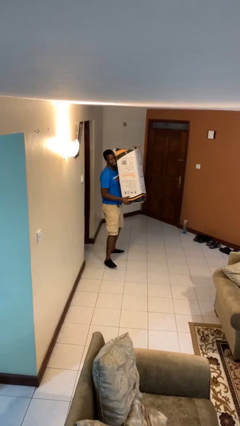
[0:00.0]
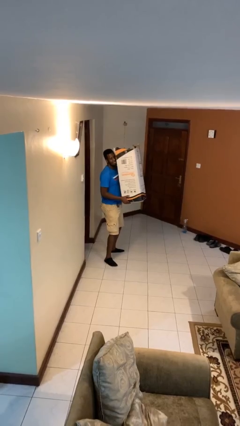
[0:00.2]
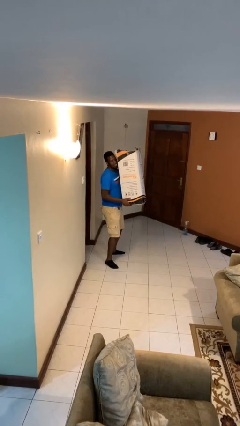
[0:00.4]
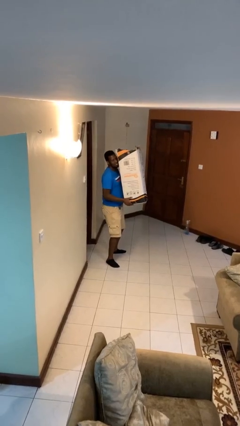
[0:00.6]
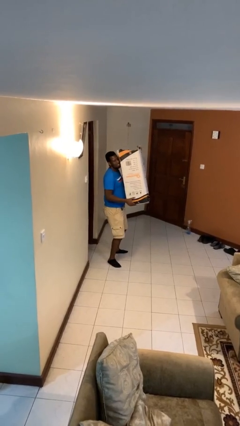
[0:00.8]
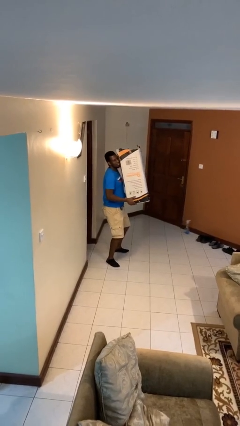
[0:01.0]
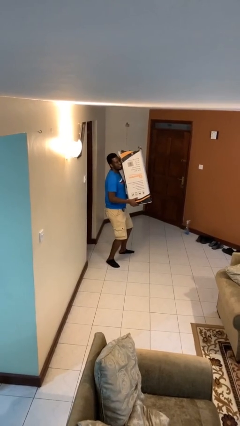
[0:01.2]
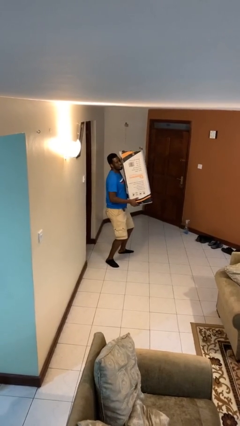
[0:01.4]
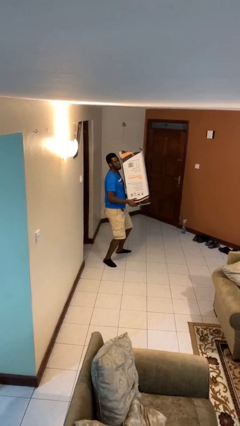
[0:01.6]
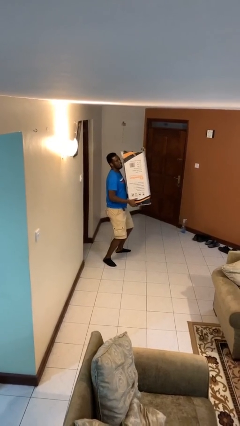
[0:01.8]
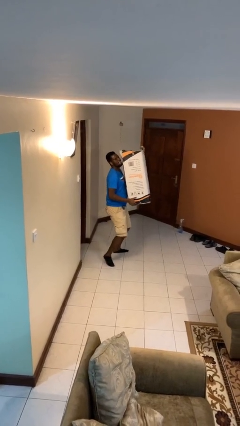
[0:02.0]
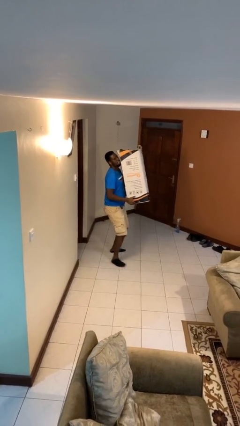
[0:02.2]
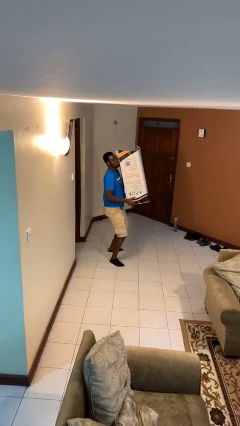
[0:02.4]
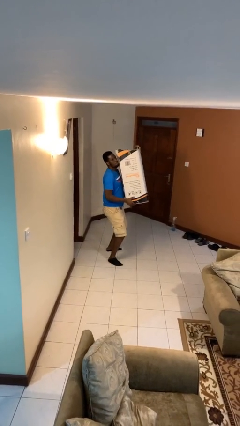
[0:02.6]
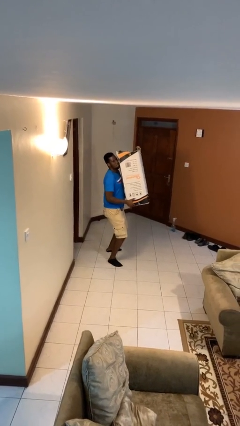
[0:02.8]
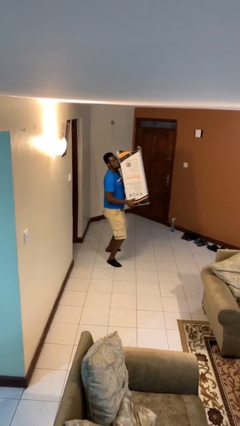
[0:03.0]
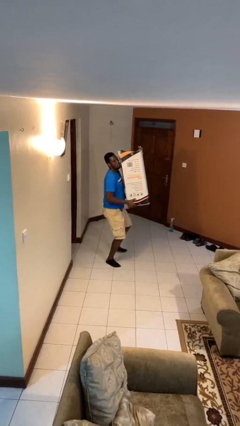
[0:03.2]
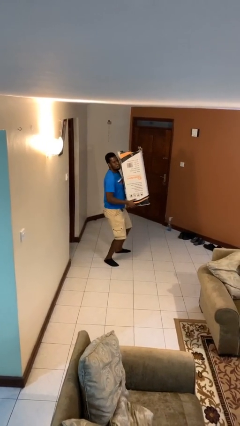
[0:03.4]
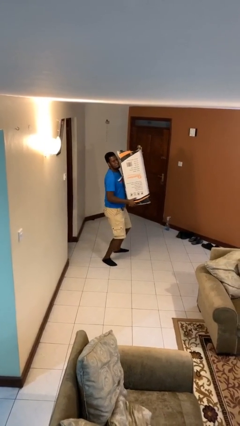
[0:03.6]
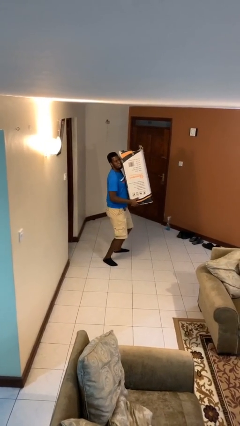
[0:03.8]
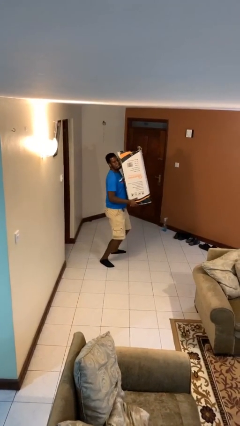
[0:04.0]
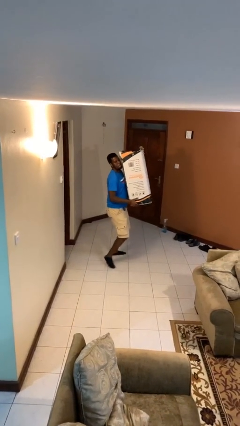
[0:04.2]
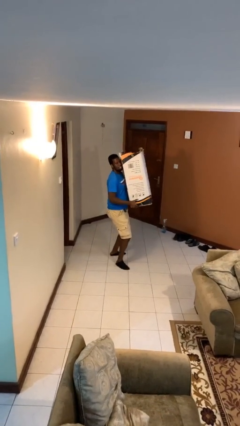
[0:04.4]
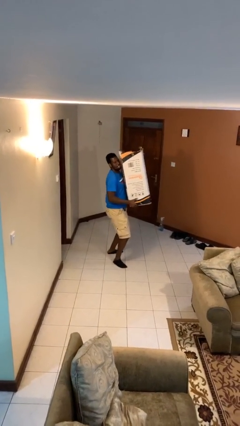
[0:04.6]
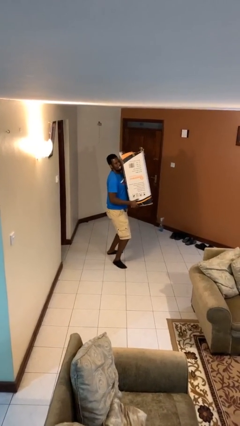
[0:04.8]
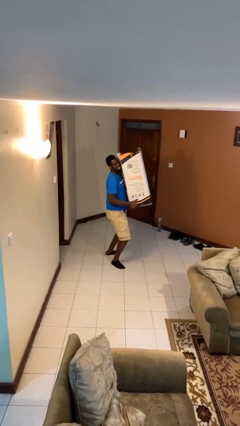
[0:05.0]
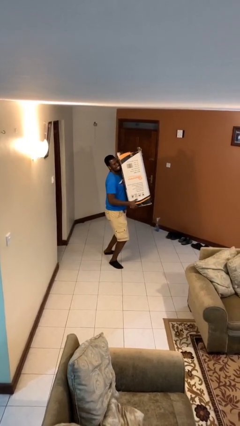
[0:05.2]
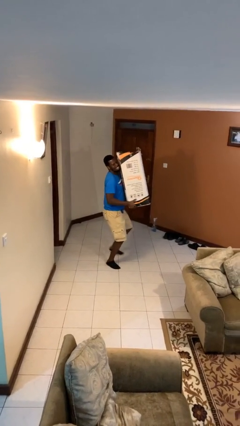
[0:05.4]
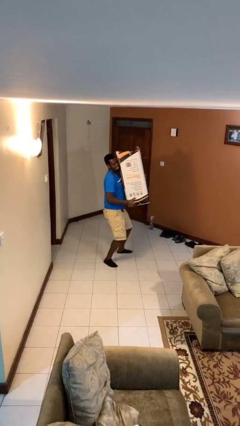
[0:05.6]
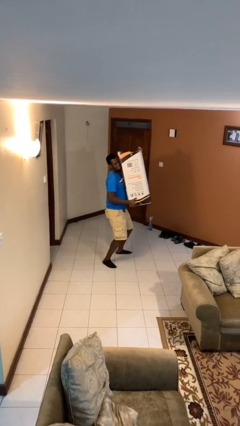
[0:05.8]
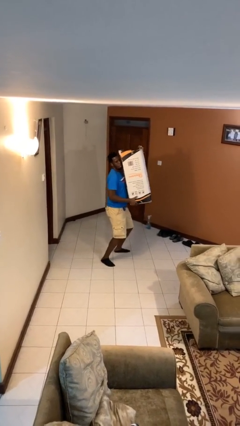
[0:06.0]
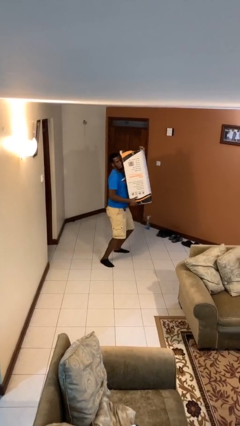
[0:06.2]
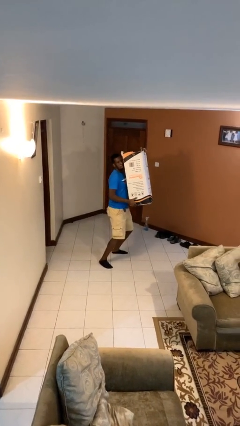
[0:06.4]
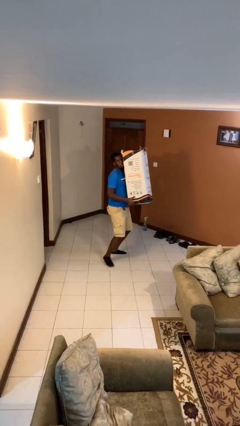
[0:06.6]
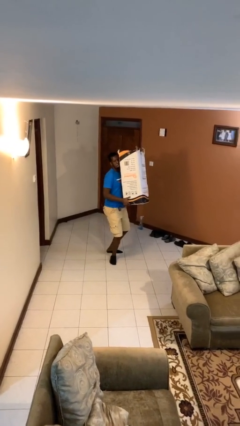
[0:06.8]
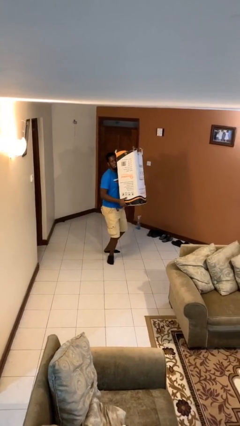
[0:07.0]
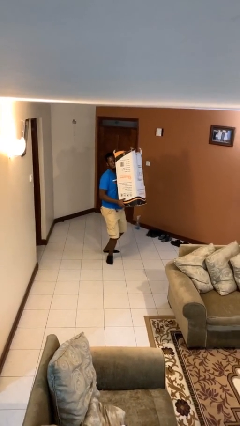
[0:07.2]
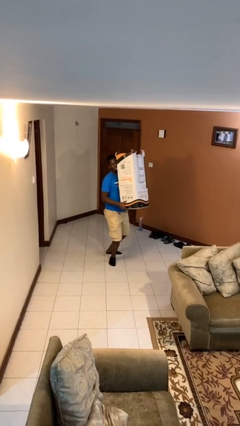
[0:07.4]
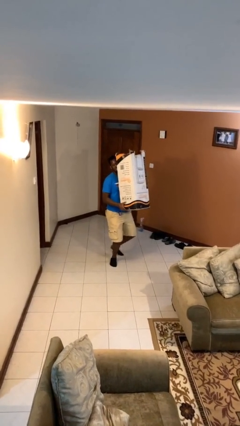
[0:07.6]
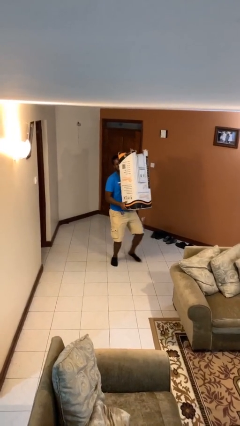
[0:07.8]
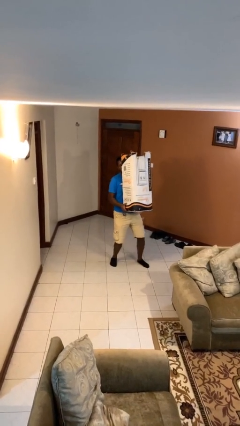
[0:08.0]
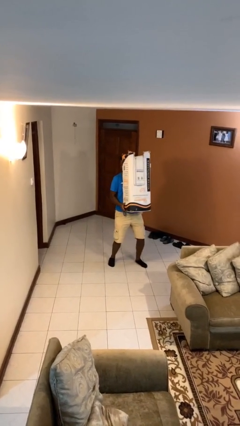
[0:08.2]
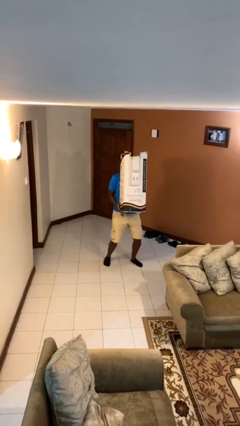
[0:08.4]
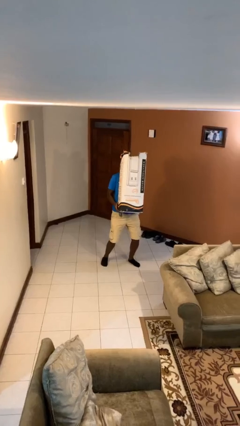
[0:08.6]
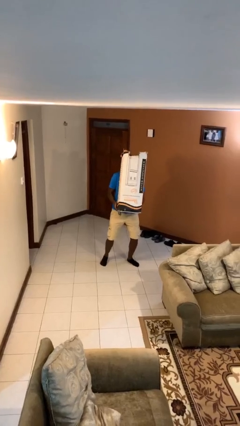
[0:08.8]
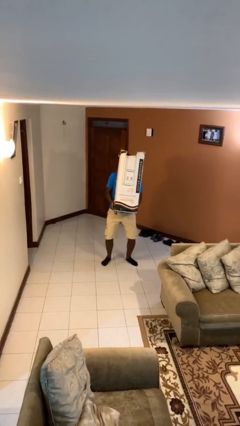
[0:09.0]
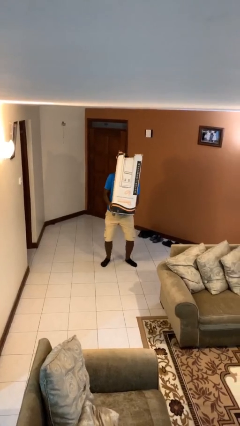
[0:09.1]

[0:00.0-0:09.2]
person carries heavy object

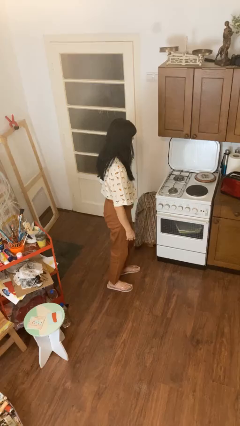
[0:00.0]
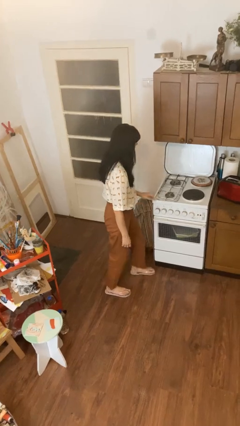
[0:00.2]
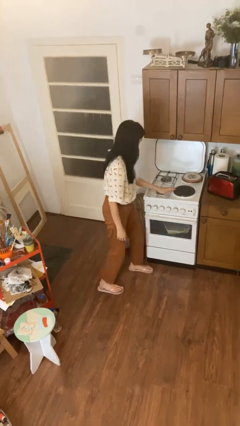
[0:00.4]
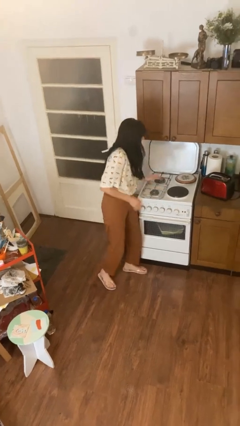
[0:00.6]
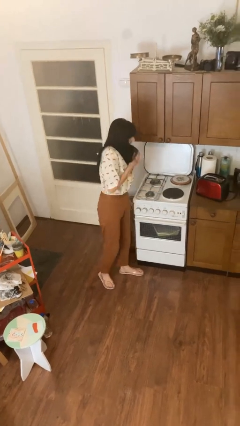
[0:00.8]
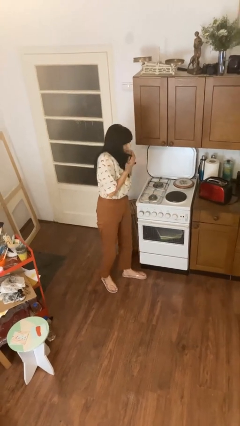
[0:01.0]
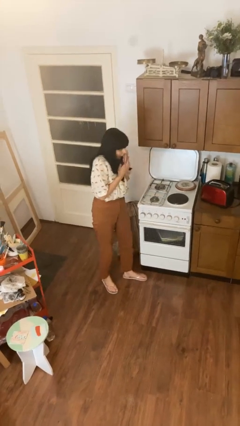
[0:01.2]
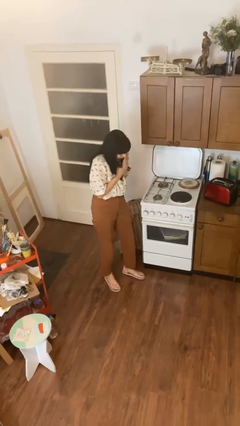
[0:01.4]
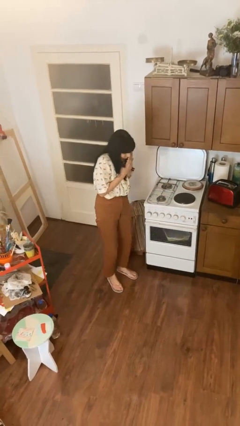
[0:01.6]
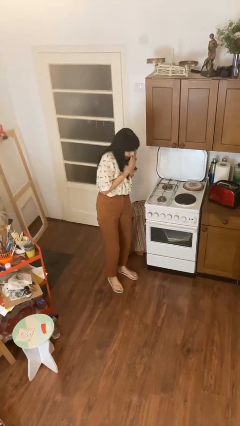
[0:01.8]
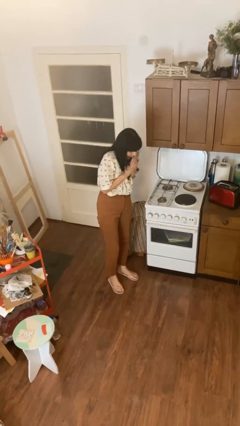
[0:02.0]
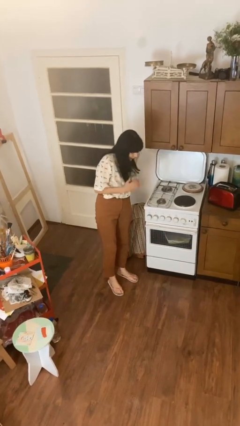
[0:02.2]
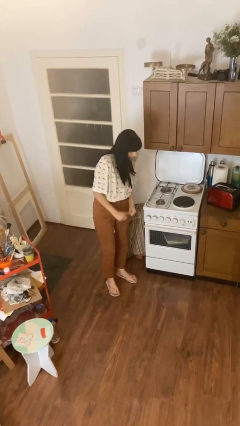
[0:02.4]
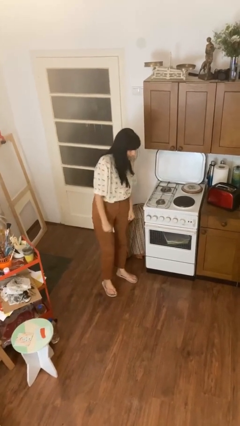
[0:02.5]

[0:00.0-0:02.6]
person burns hand

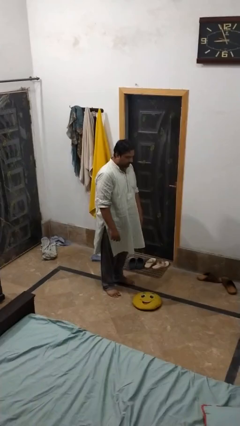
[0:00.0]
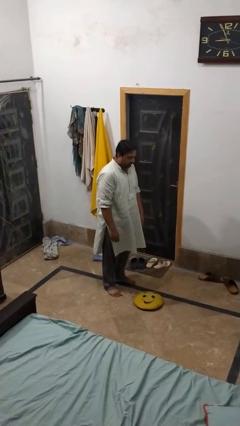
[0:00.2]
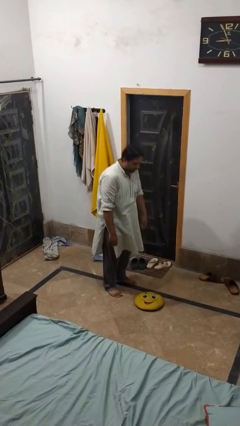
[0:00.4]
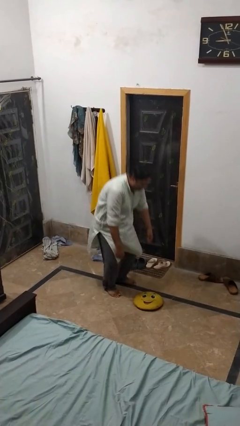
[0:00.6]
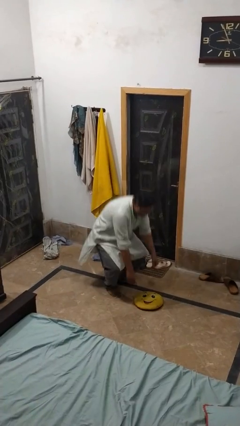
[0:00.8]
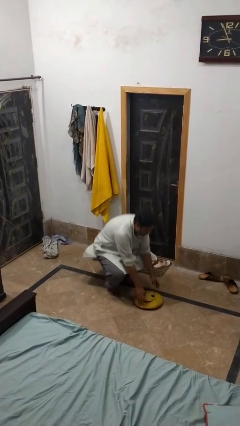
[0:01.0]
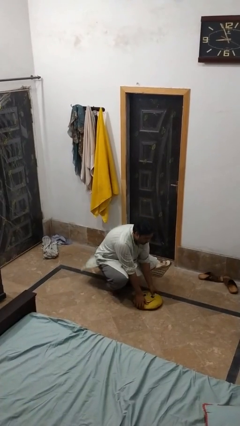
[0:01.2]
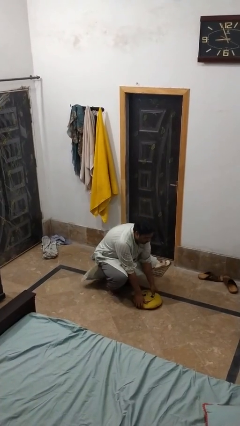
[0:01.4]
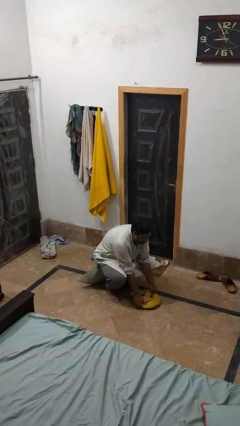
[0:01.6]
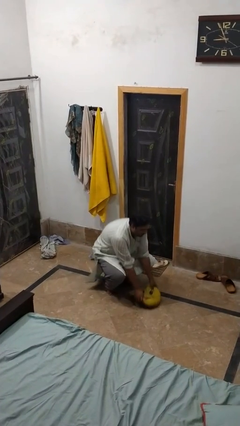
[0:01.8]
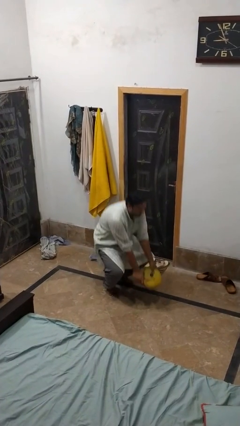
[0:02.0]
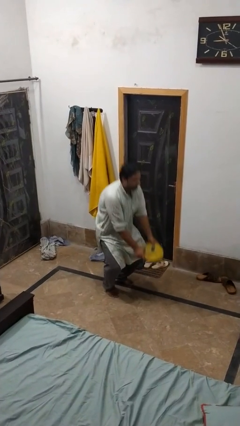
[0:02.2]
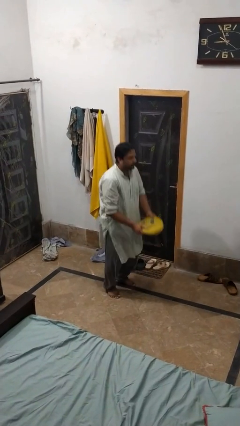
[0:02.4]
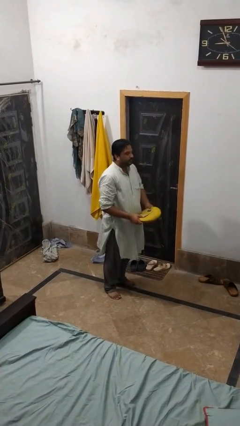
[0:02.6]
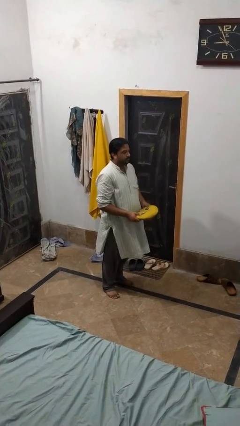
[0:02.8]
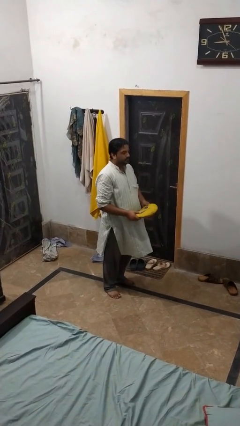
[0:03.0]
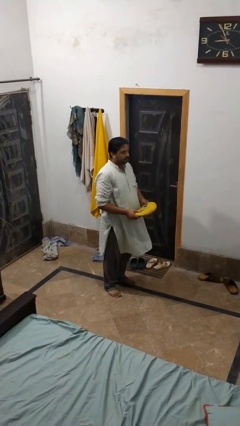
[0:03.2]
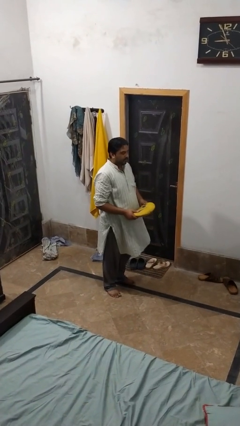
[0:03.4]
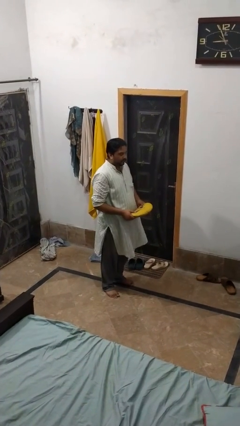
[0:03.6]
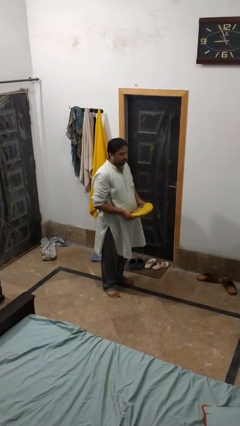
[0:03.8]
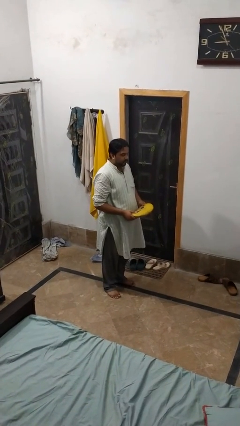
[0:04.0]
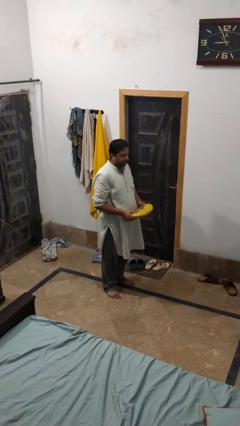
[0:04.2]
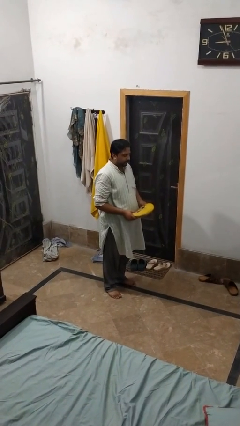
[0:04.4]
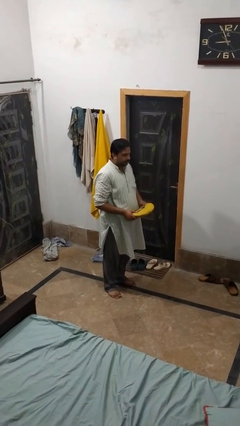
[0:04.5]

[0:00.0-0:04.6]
person picks up object from floor

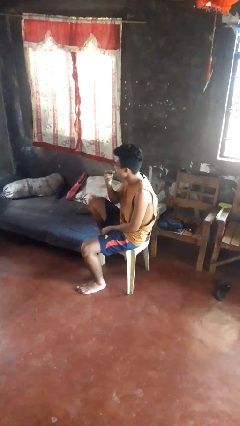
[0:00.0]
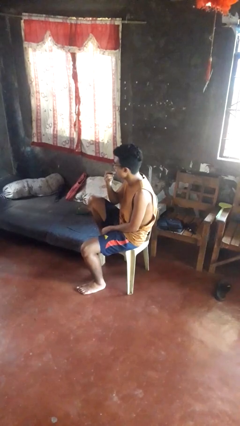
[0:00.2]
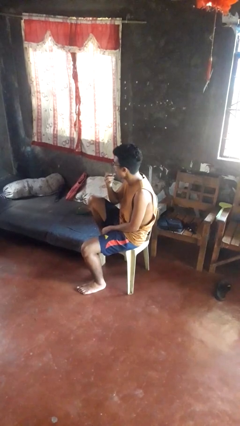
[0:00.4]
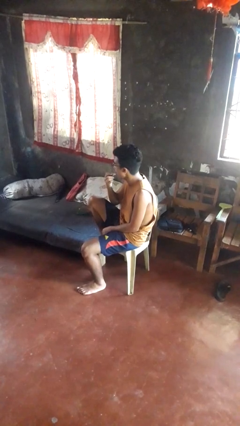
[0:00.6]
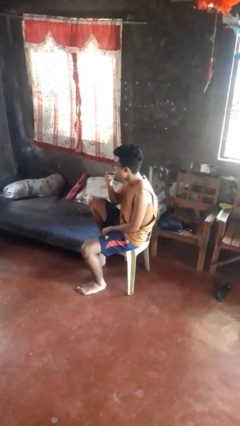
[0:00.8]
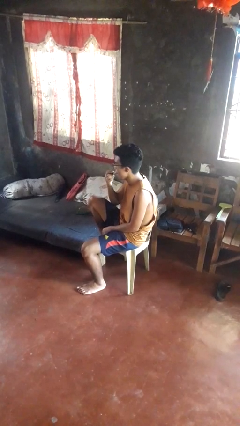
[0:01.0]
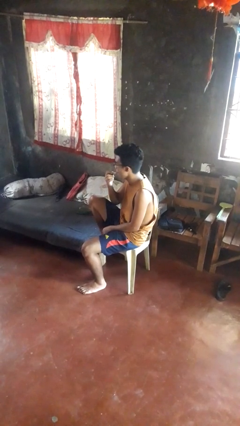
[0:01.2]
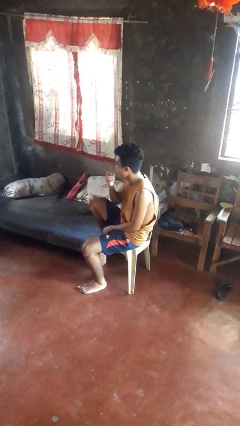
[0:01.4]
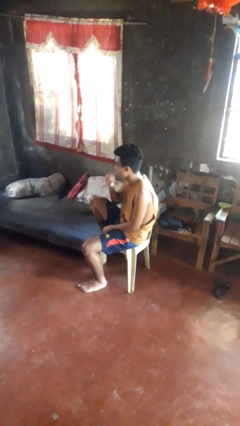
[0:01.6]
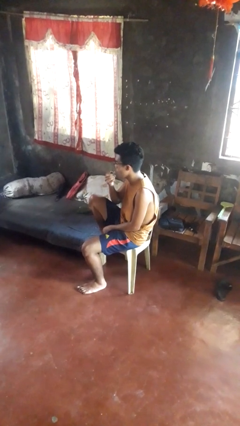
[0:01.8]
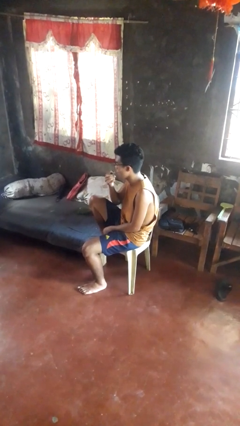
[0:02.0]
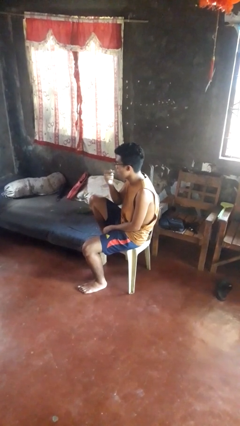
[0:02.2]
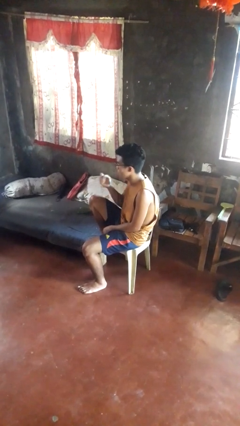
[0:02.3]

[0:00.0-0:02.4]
person applies lip makeup
